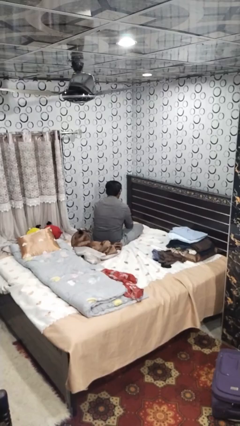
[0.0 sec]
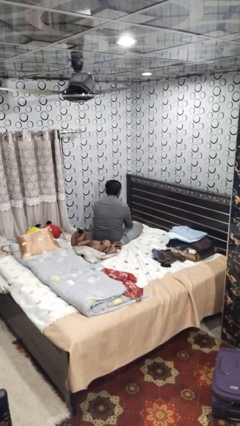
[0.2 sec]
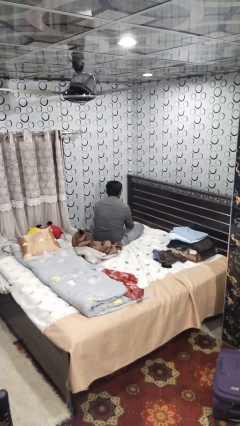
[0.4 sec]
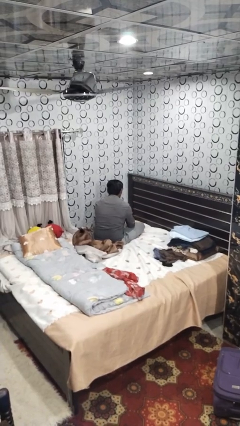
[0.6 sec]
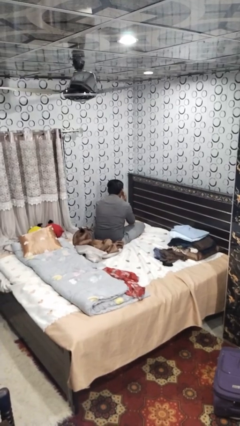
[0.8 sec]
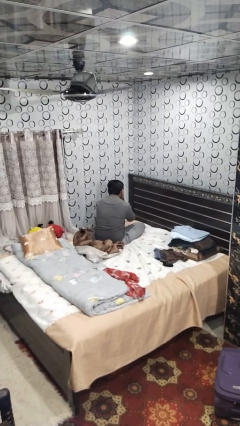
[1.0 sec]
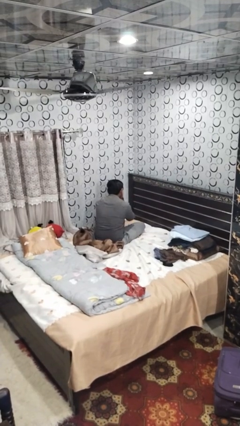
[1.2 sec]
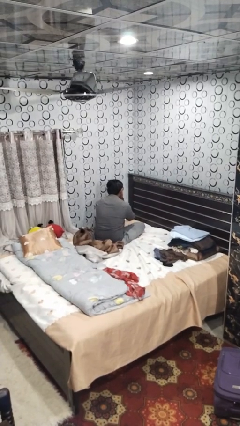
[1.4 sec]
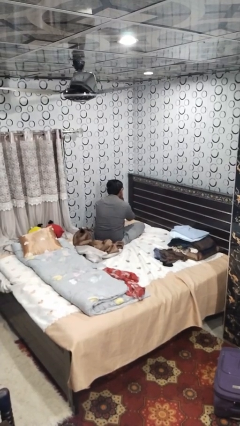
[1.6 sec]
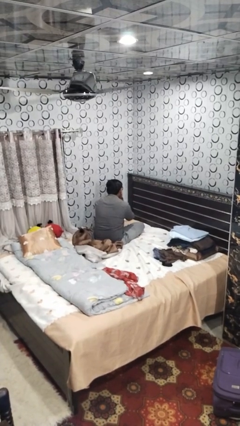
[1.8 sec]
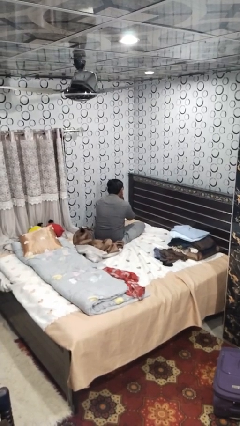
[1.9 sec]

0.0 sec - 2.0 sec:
person covers face with hands

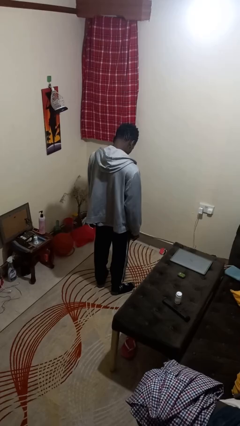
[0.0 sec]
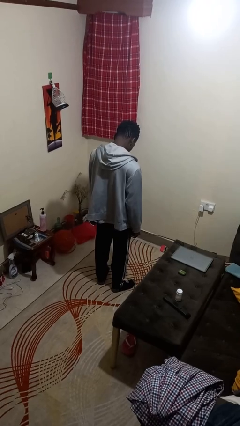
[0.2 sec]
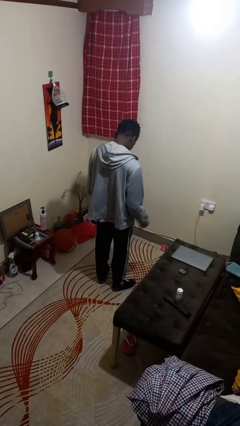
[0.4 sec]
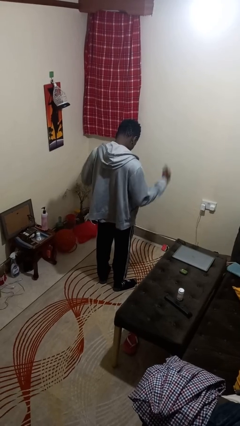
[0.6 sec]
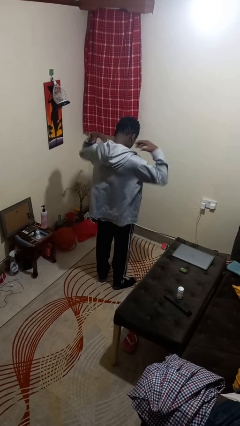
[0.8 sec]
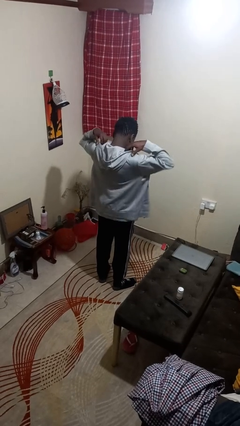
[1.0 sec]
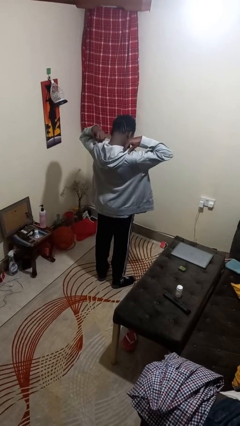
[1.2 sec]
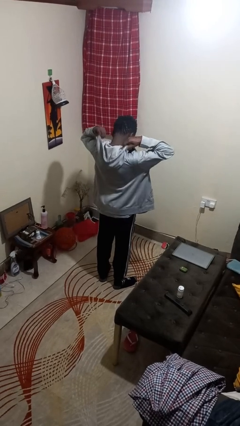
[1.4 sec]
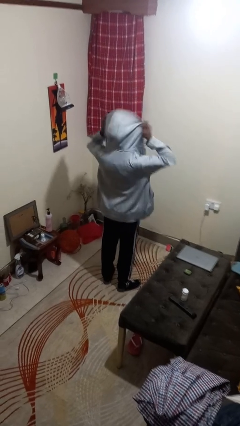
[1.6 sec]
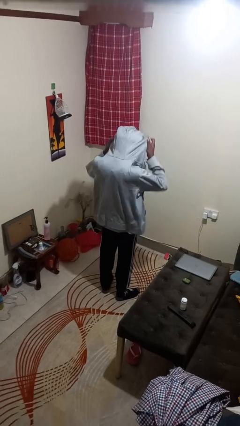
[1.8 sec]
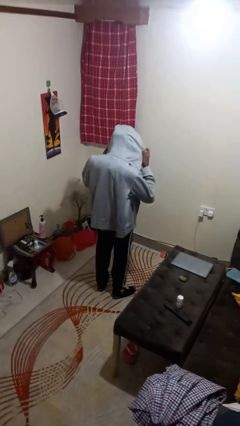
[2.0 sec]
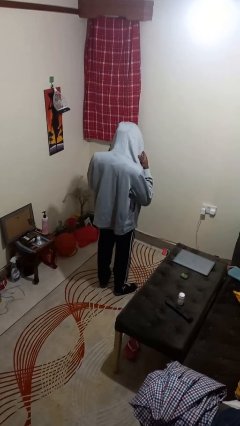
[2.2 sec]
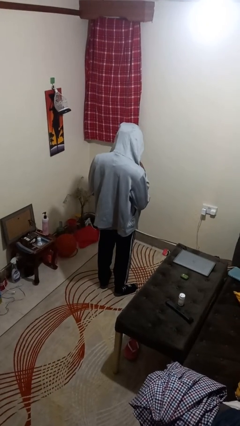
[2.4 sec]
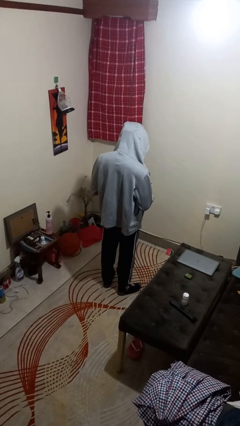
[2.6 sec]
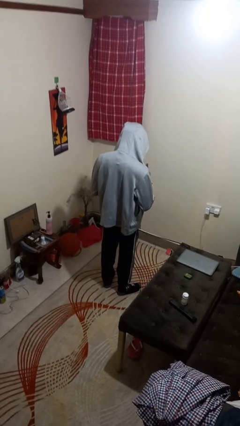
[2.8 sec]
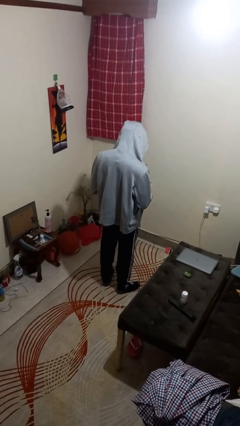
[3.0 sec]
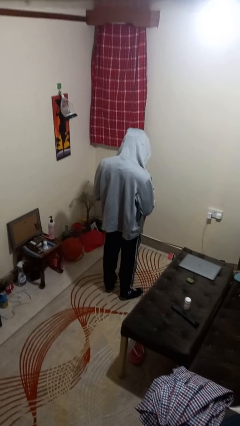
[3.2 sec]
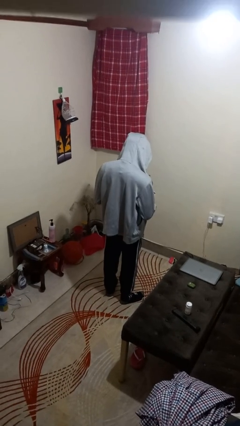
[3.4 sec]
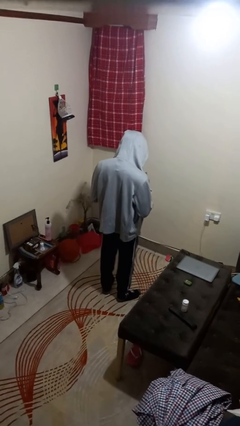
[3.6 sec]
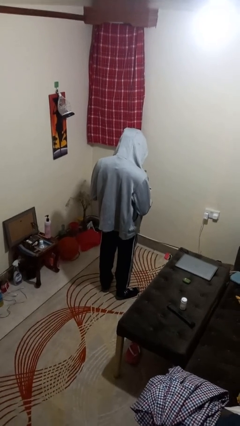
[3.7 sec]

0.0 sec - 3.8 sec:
person puts on hoodie

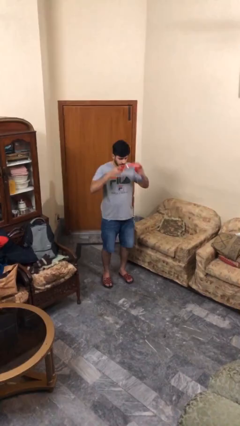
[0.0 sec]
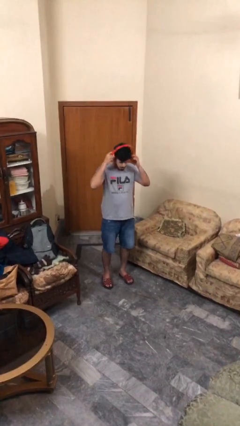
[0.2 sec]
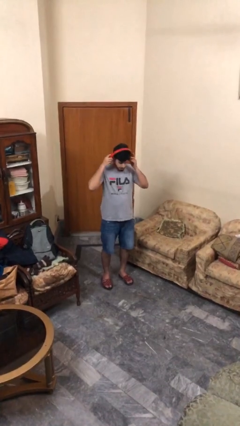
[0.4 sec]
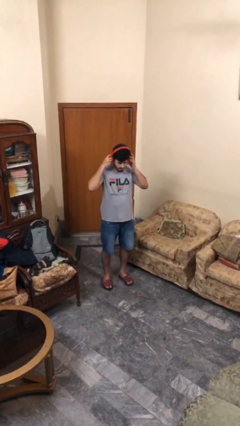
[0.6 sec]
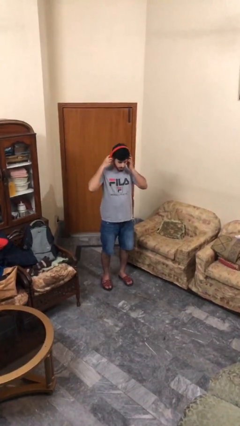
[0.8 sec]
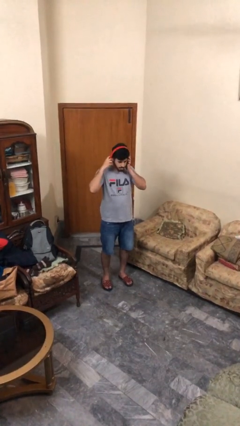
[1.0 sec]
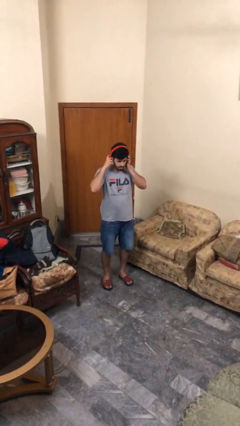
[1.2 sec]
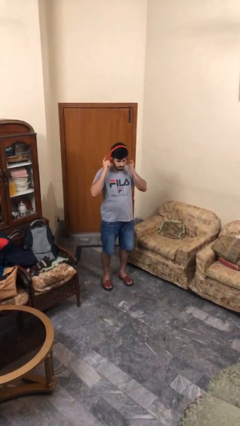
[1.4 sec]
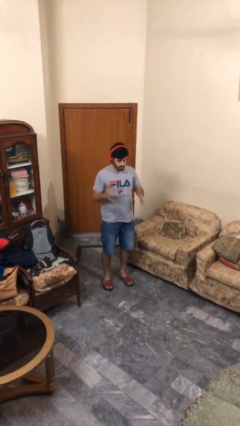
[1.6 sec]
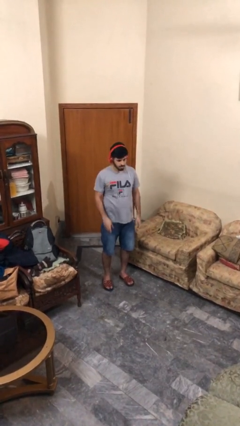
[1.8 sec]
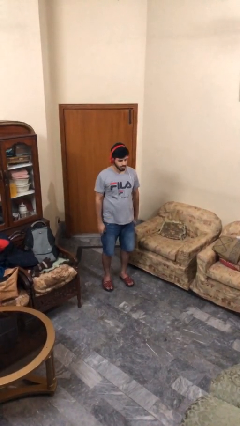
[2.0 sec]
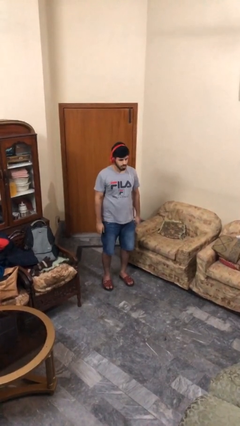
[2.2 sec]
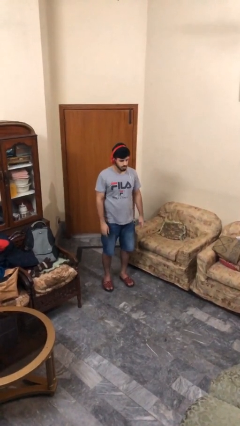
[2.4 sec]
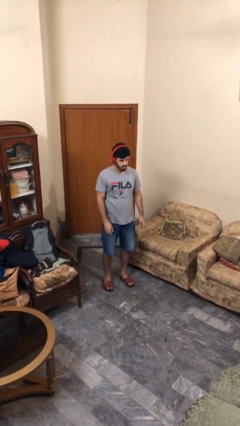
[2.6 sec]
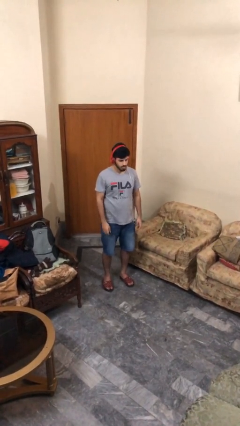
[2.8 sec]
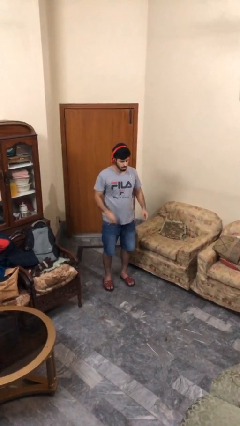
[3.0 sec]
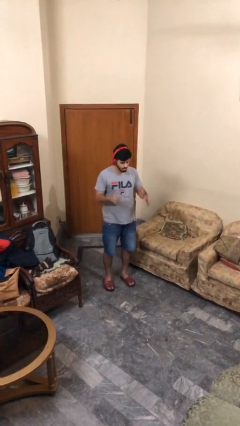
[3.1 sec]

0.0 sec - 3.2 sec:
person puts on headphones

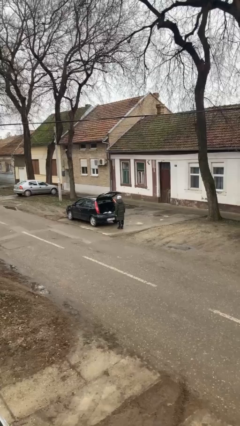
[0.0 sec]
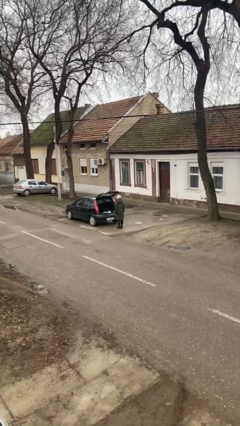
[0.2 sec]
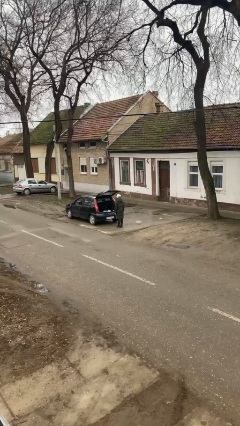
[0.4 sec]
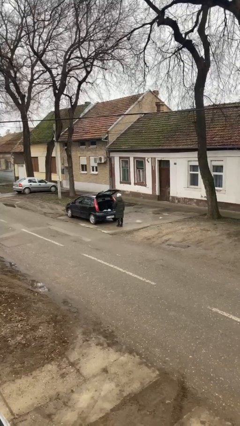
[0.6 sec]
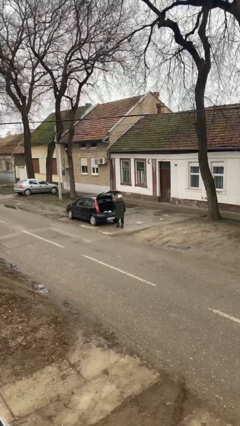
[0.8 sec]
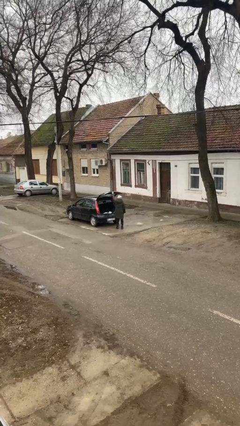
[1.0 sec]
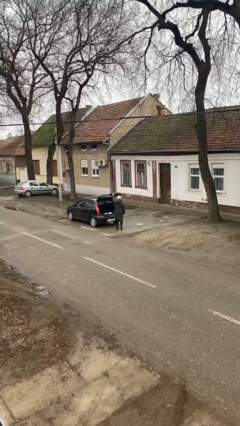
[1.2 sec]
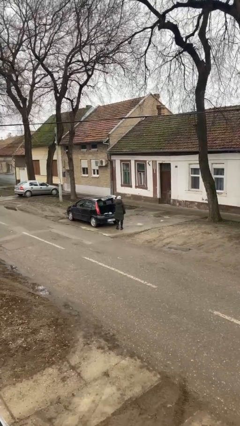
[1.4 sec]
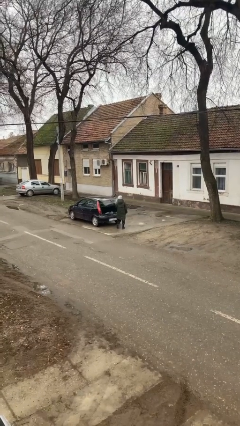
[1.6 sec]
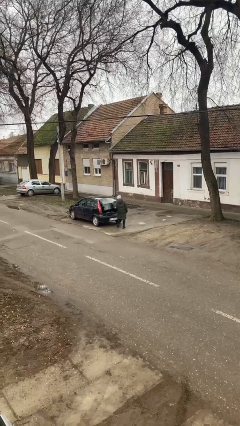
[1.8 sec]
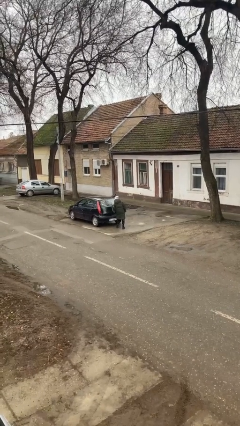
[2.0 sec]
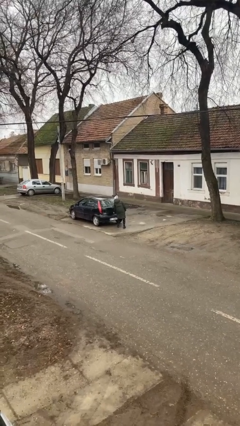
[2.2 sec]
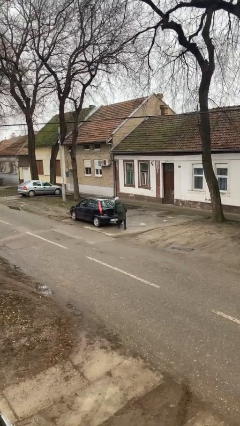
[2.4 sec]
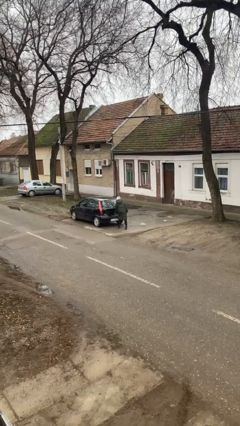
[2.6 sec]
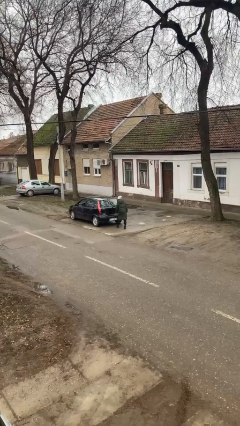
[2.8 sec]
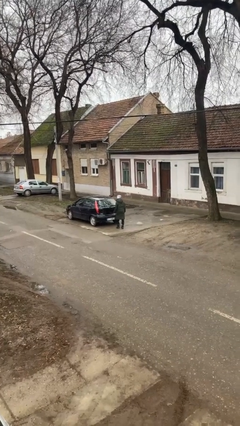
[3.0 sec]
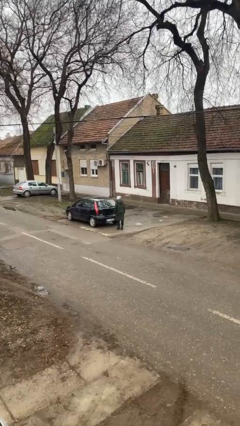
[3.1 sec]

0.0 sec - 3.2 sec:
person closes car trunk

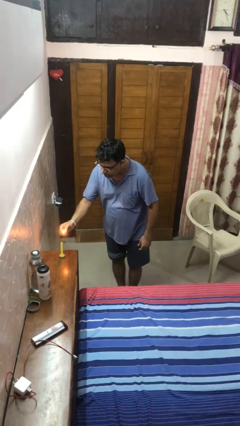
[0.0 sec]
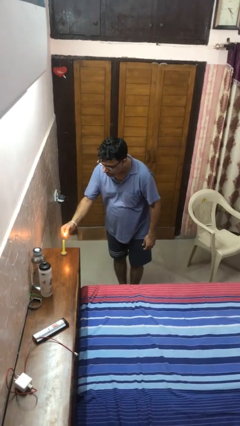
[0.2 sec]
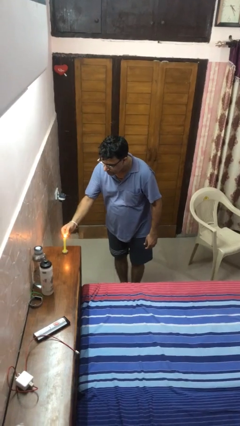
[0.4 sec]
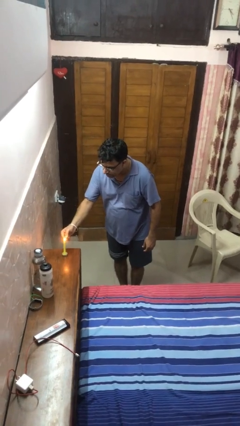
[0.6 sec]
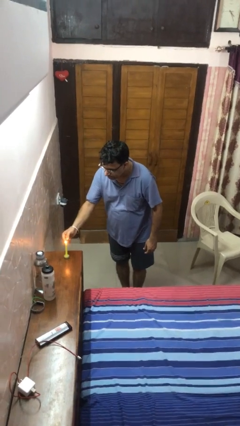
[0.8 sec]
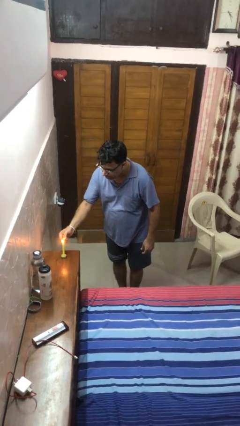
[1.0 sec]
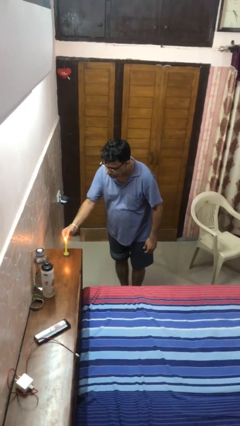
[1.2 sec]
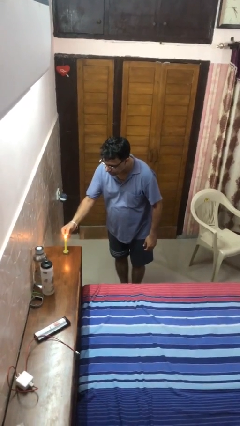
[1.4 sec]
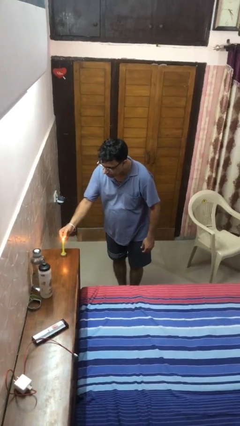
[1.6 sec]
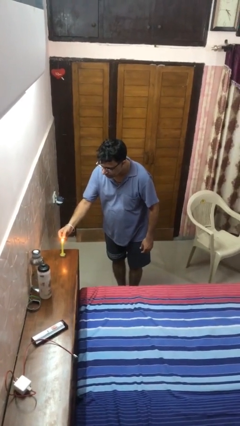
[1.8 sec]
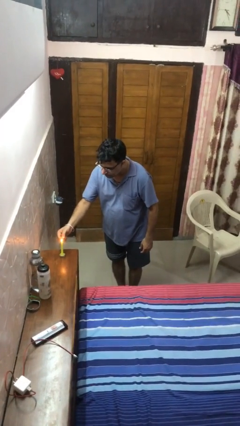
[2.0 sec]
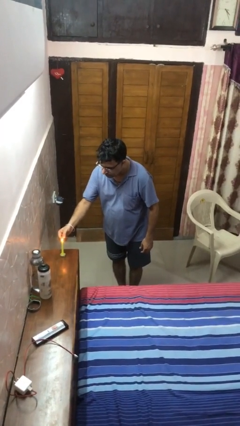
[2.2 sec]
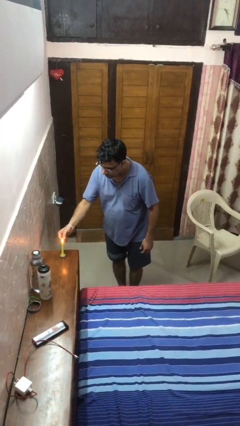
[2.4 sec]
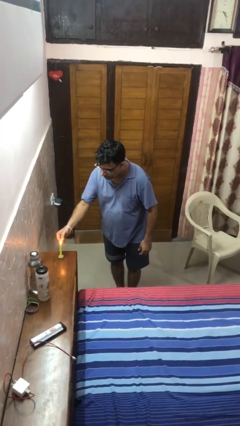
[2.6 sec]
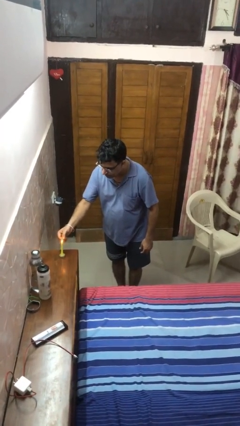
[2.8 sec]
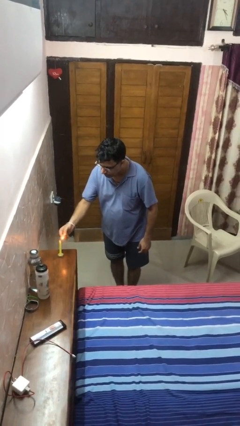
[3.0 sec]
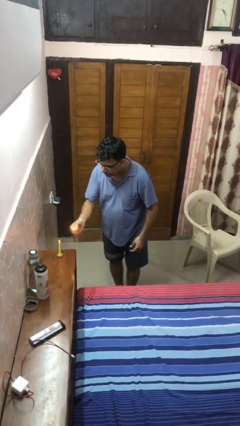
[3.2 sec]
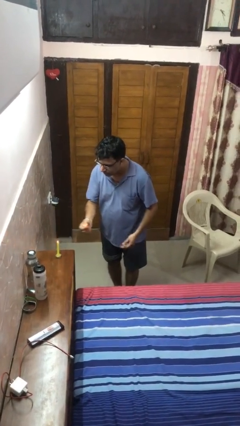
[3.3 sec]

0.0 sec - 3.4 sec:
person lights candle

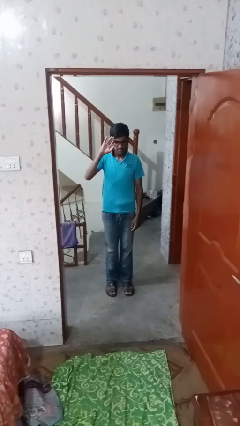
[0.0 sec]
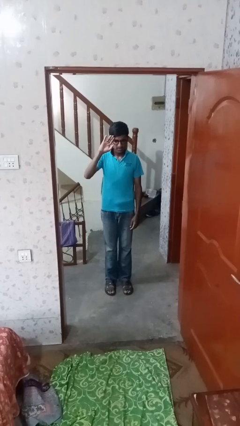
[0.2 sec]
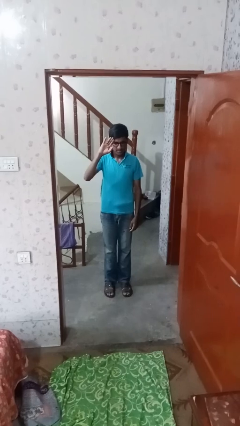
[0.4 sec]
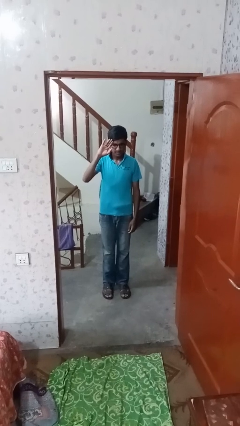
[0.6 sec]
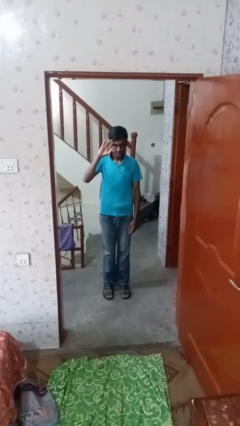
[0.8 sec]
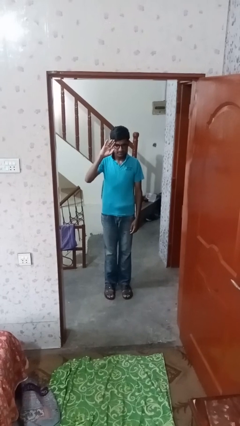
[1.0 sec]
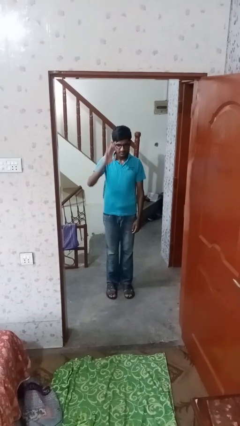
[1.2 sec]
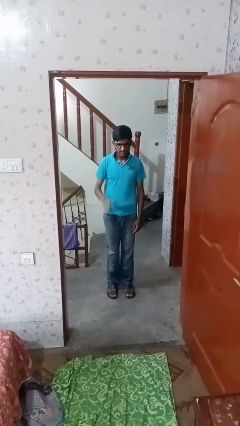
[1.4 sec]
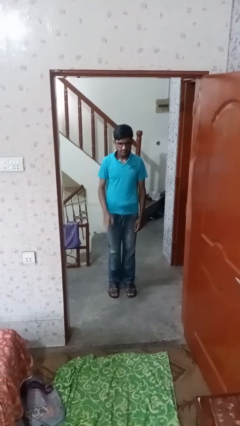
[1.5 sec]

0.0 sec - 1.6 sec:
person salutes
